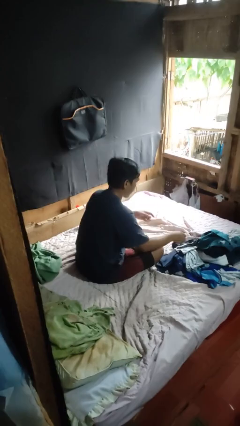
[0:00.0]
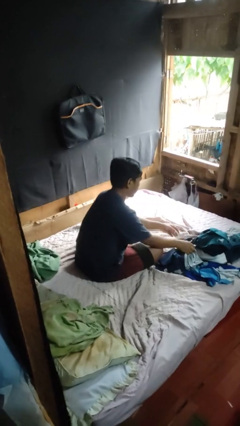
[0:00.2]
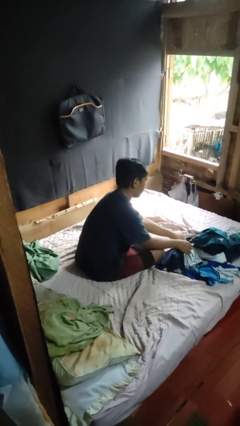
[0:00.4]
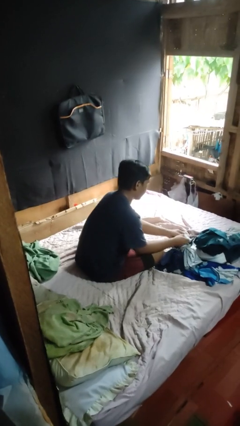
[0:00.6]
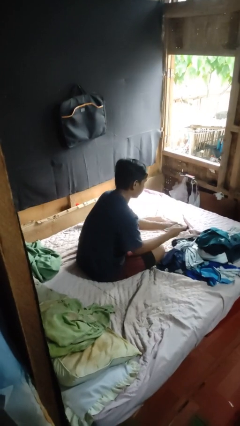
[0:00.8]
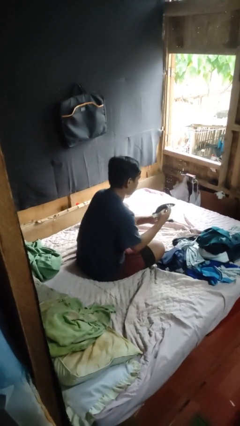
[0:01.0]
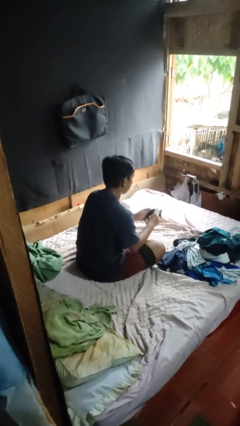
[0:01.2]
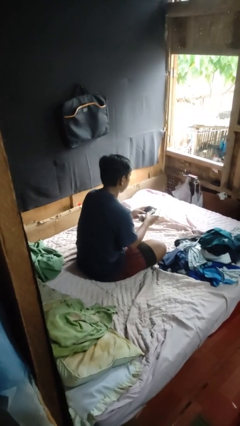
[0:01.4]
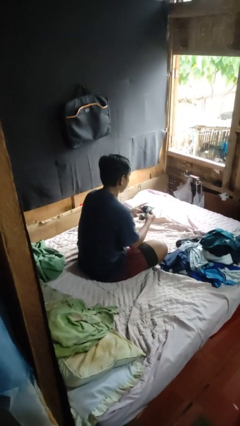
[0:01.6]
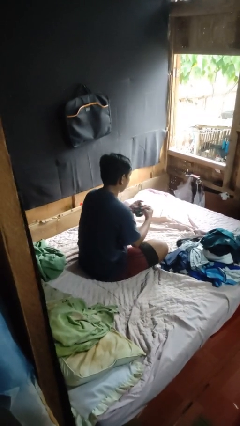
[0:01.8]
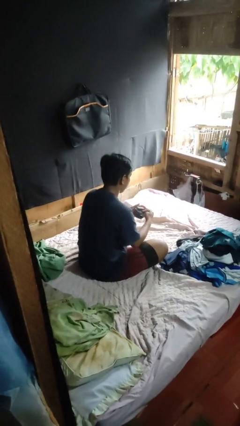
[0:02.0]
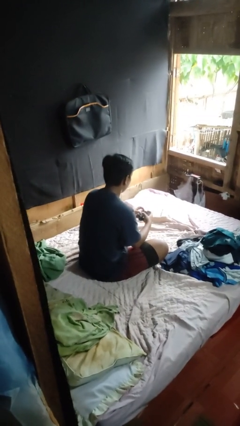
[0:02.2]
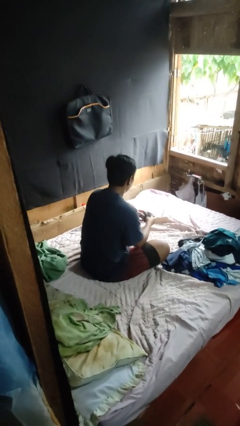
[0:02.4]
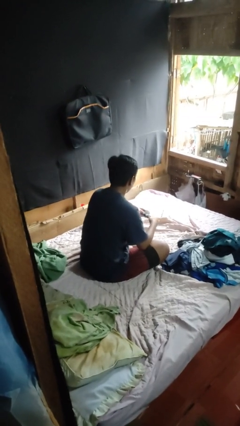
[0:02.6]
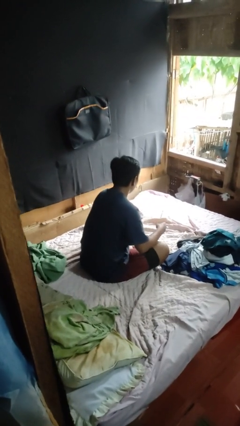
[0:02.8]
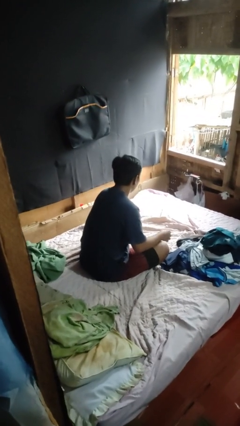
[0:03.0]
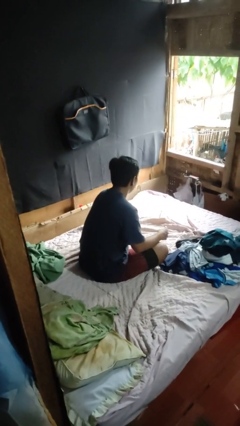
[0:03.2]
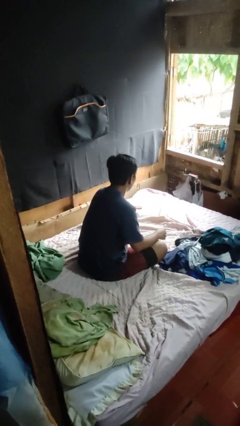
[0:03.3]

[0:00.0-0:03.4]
person folds socks

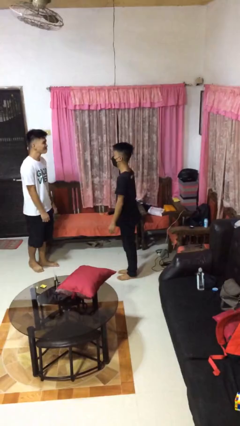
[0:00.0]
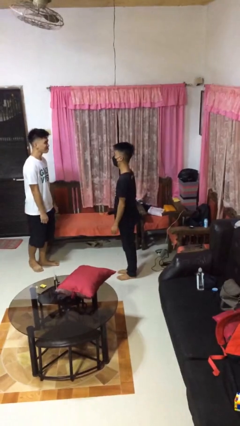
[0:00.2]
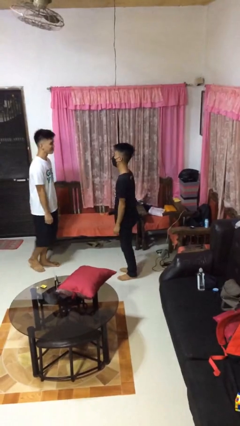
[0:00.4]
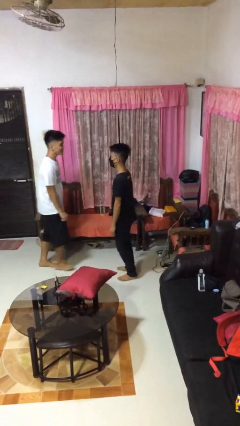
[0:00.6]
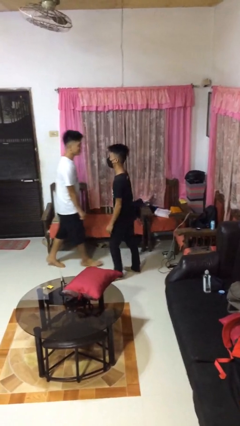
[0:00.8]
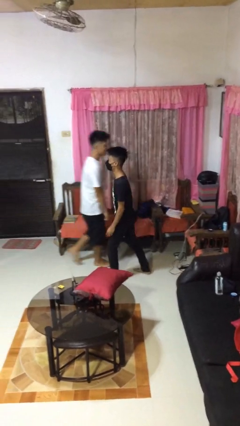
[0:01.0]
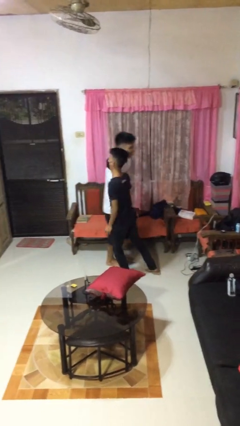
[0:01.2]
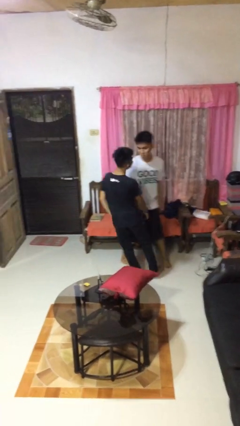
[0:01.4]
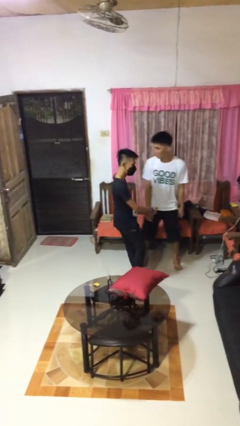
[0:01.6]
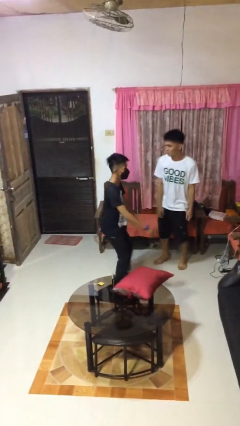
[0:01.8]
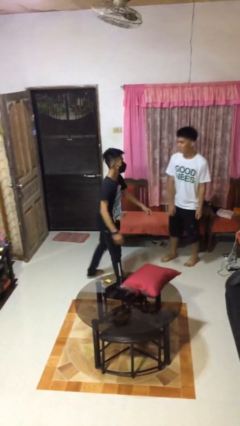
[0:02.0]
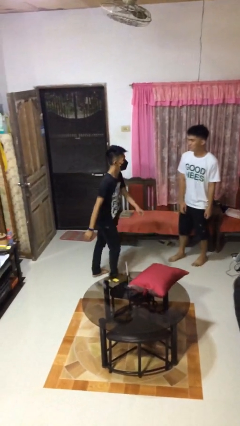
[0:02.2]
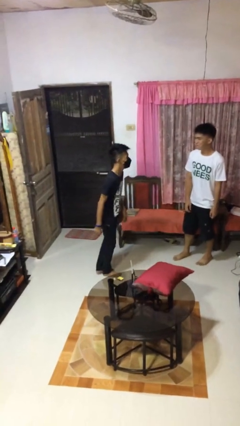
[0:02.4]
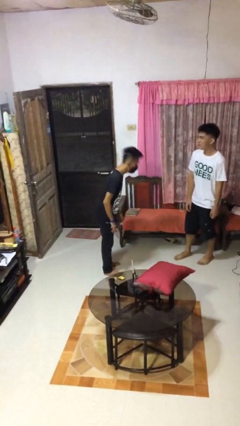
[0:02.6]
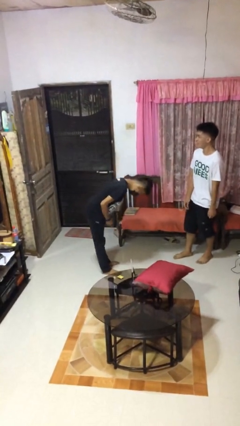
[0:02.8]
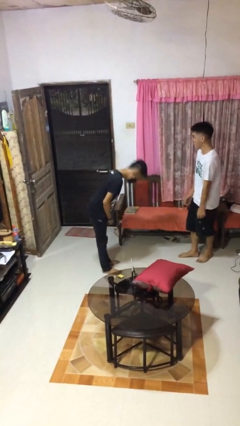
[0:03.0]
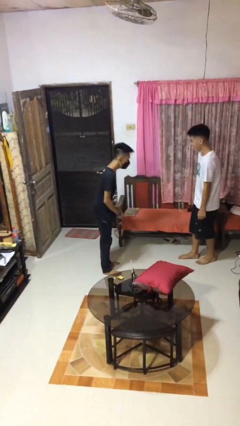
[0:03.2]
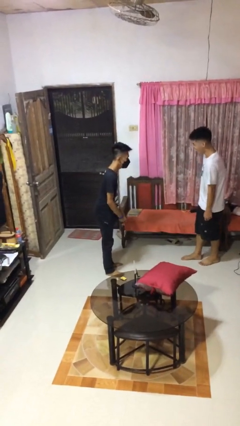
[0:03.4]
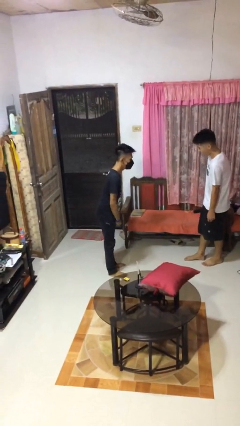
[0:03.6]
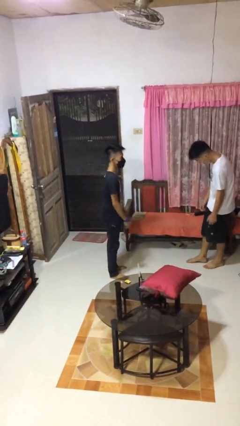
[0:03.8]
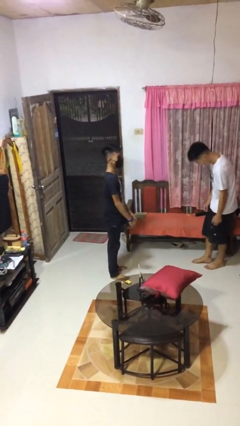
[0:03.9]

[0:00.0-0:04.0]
person bumps into person

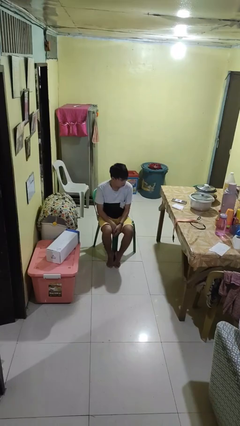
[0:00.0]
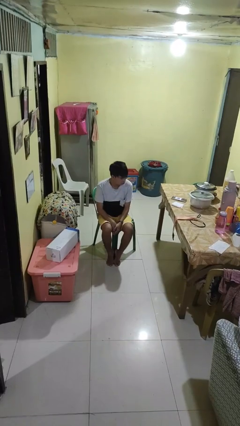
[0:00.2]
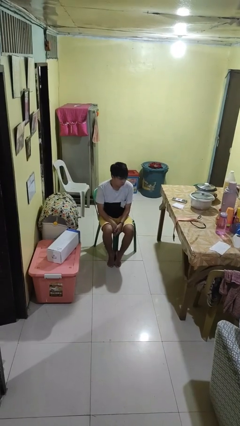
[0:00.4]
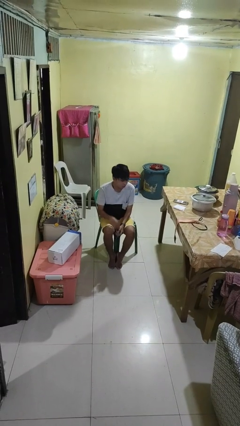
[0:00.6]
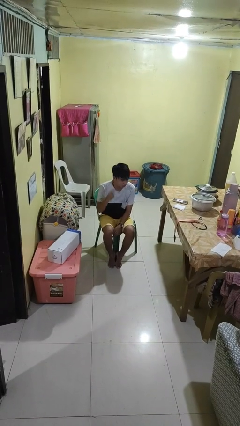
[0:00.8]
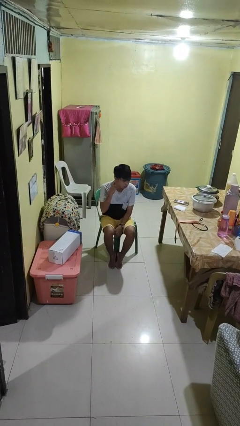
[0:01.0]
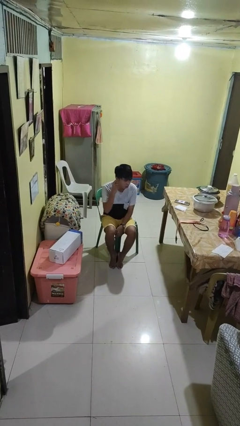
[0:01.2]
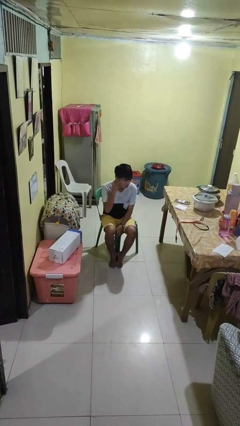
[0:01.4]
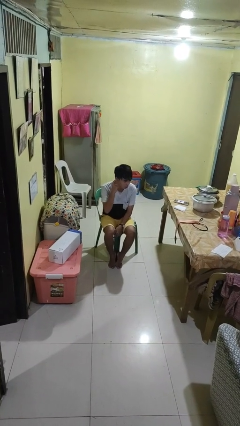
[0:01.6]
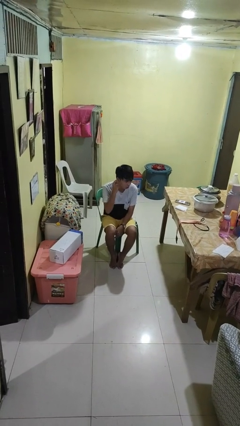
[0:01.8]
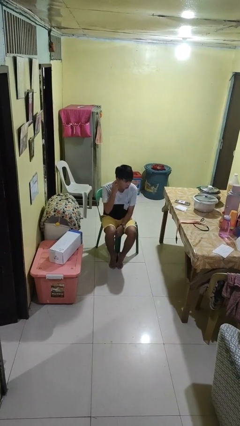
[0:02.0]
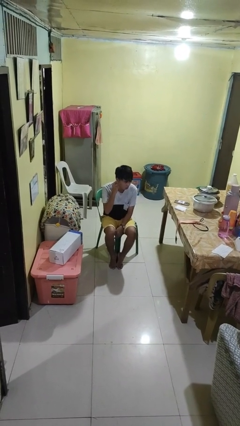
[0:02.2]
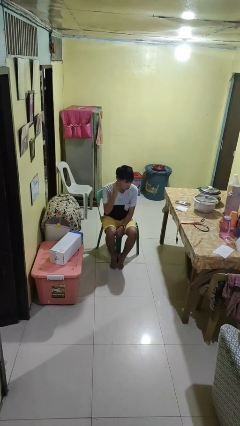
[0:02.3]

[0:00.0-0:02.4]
person gestures listen closely

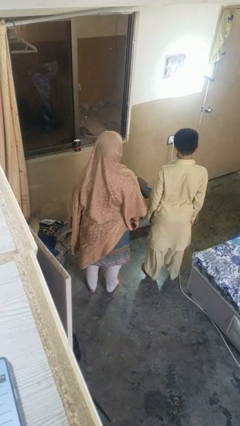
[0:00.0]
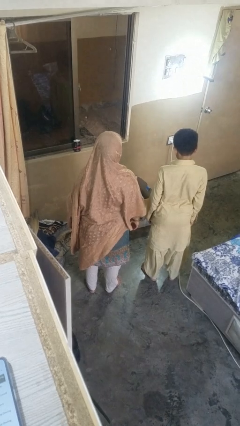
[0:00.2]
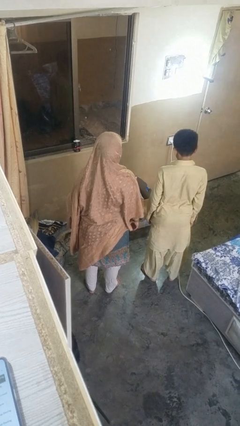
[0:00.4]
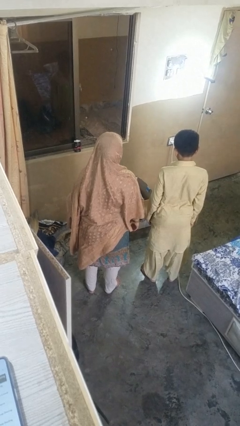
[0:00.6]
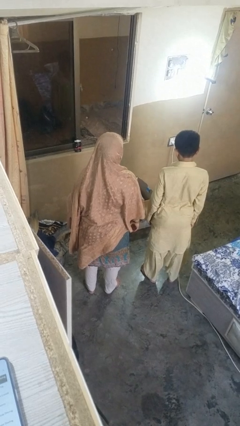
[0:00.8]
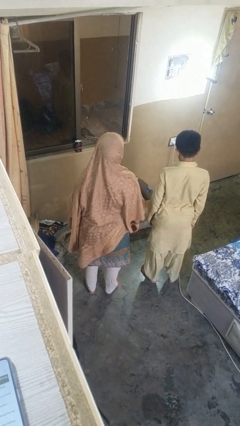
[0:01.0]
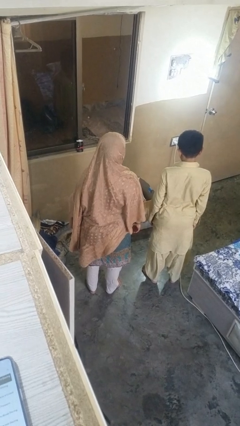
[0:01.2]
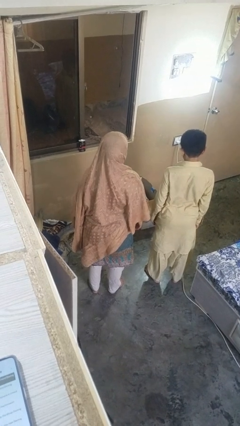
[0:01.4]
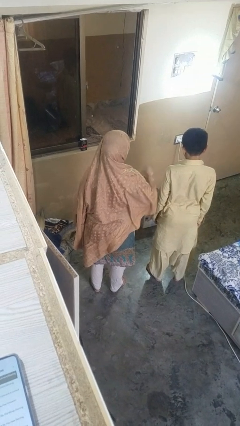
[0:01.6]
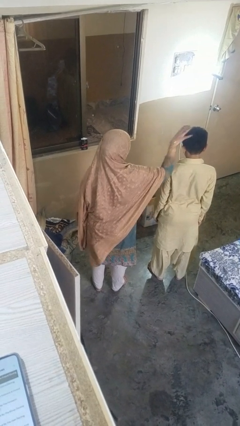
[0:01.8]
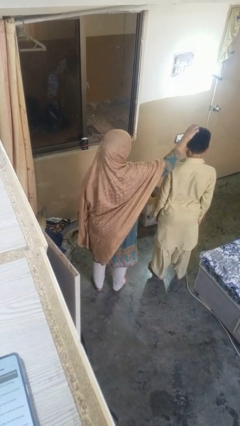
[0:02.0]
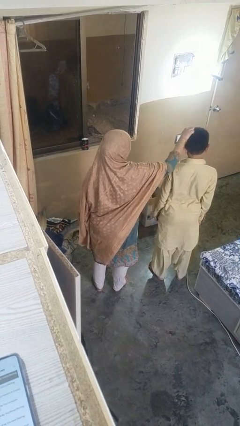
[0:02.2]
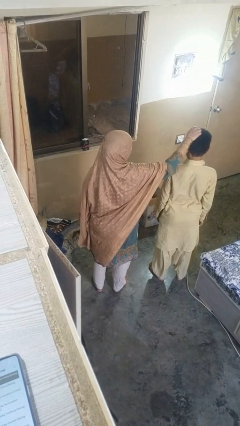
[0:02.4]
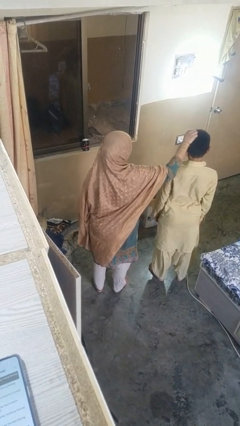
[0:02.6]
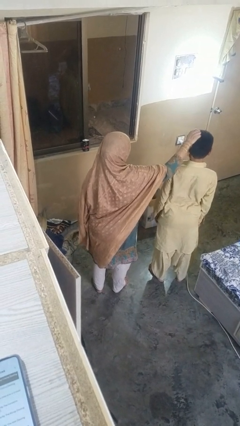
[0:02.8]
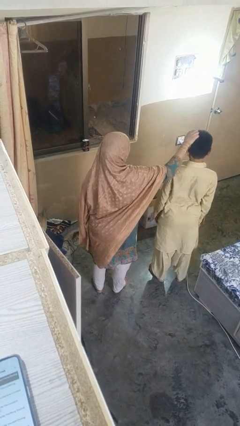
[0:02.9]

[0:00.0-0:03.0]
person grabs person by hair

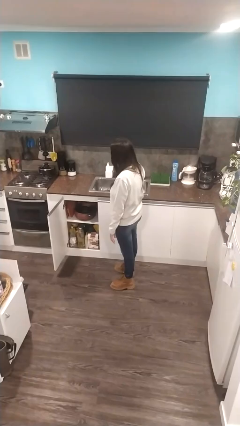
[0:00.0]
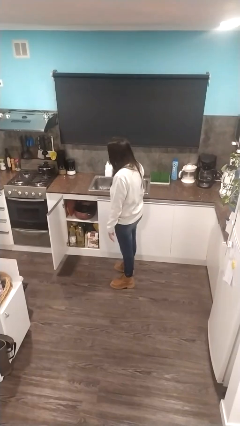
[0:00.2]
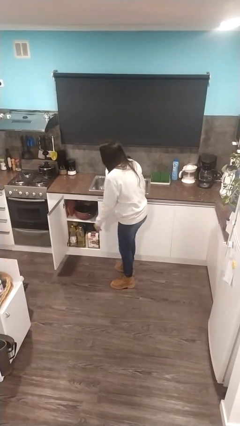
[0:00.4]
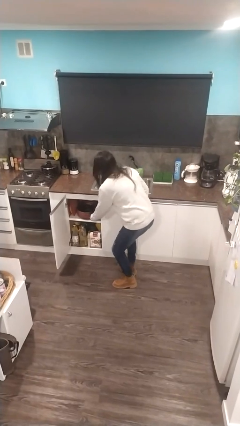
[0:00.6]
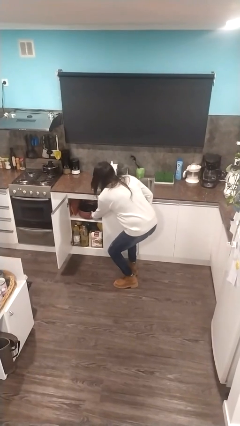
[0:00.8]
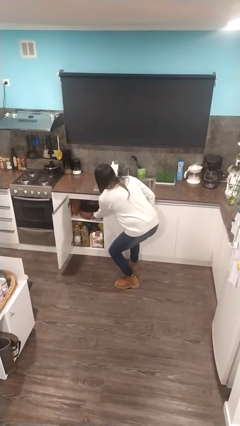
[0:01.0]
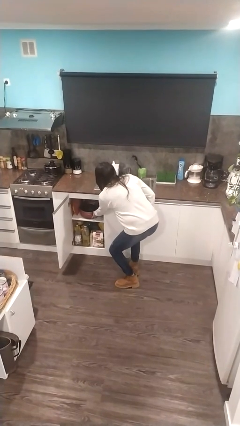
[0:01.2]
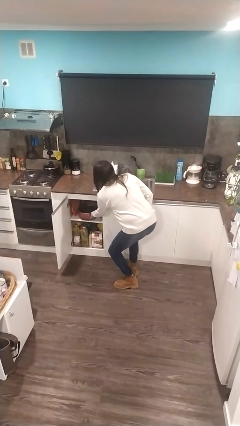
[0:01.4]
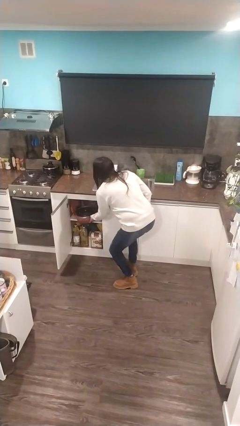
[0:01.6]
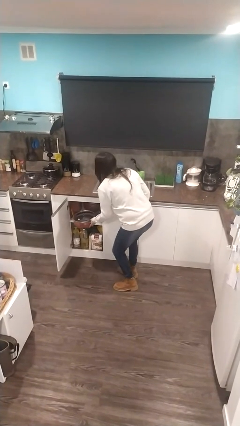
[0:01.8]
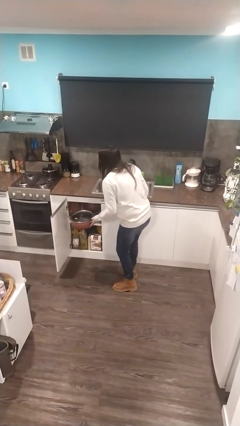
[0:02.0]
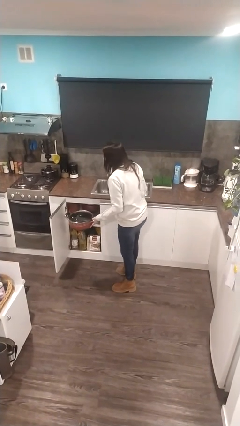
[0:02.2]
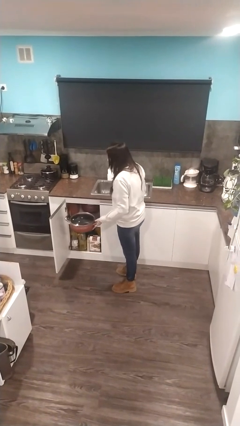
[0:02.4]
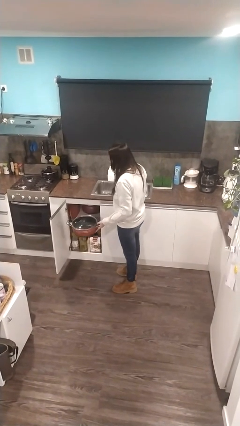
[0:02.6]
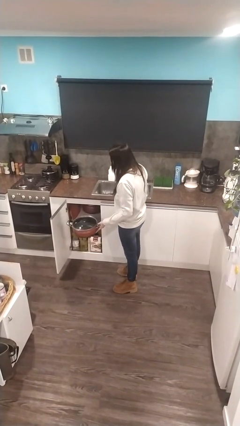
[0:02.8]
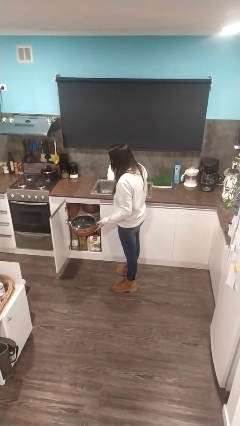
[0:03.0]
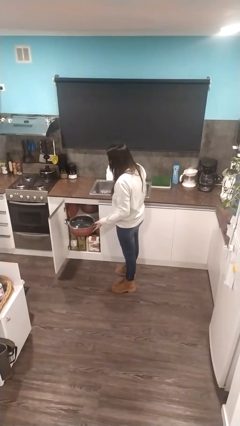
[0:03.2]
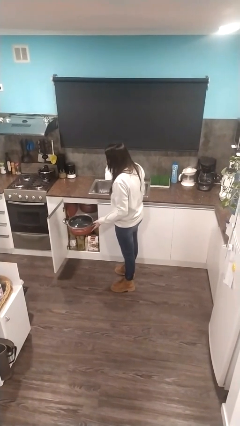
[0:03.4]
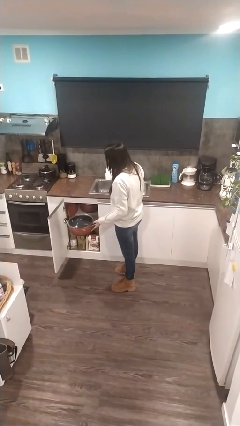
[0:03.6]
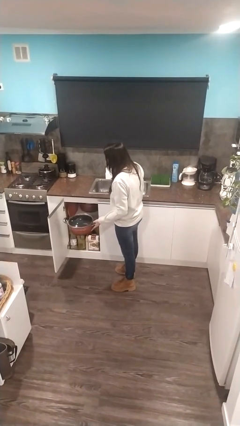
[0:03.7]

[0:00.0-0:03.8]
person picks up object from cabinet

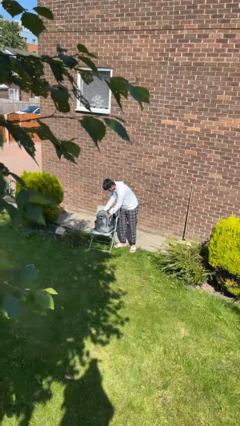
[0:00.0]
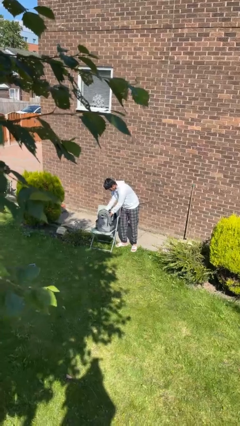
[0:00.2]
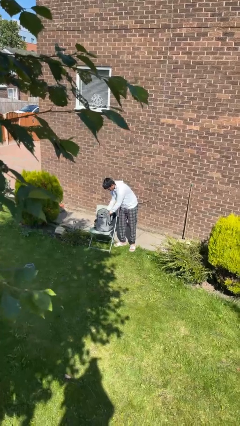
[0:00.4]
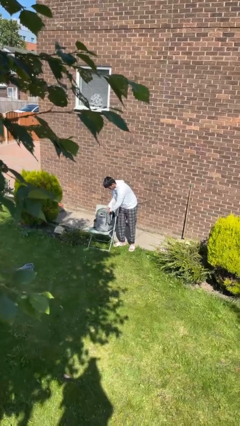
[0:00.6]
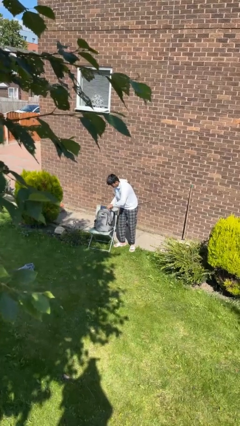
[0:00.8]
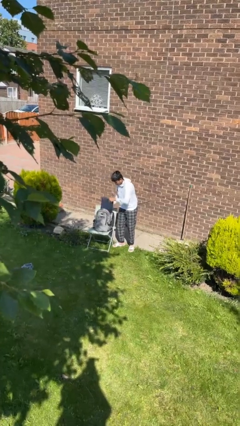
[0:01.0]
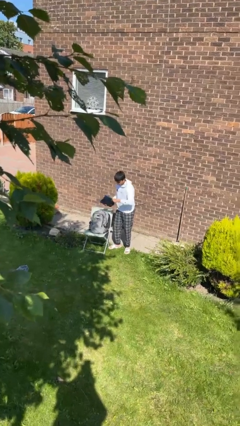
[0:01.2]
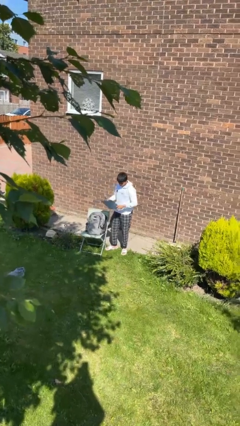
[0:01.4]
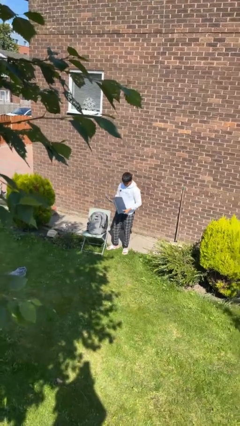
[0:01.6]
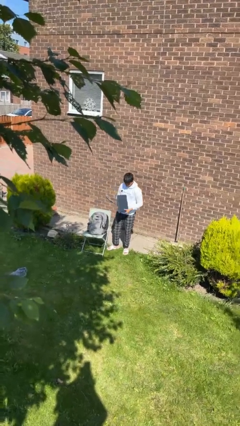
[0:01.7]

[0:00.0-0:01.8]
person takes object from backpack
